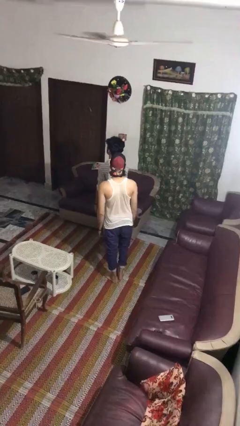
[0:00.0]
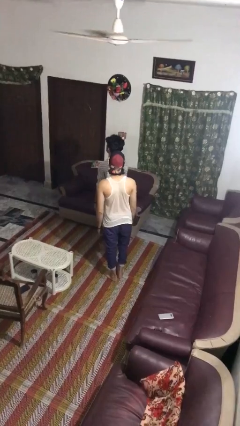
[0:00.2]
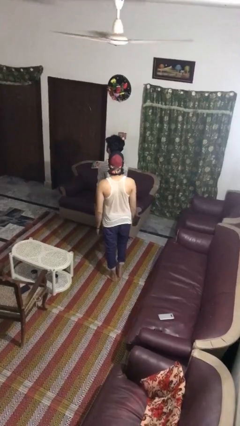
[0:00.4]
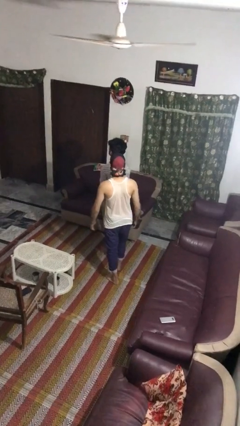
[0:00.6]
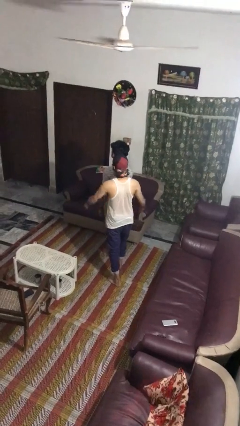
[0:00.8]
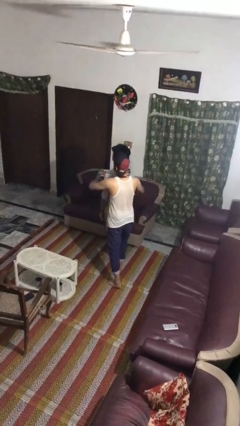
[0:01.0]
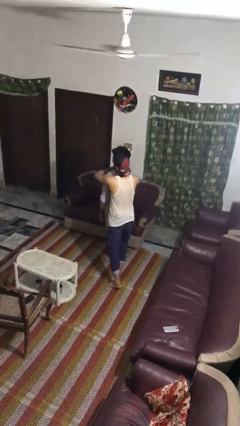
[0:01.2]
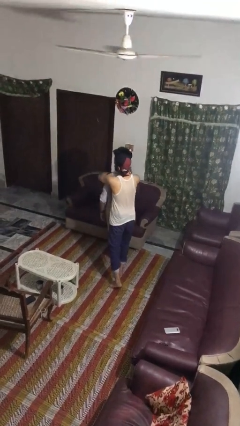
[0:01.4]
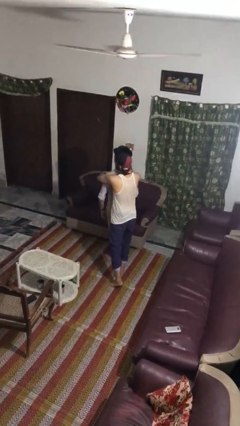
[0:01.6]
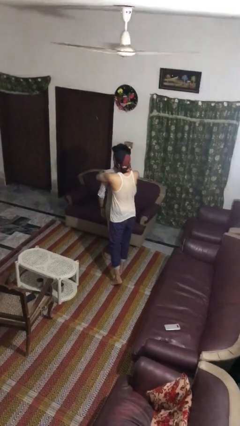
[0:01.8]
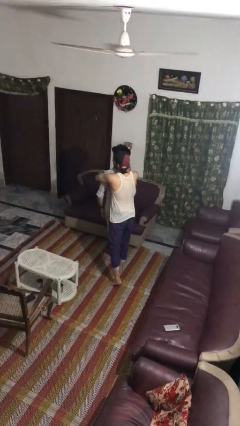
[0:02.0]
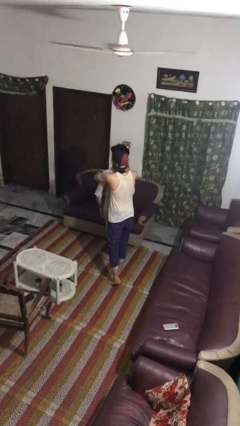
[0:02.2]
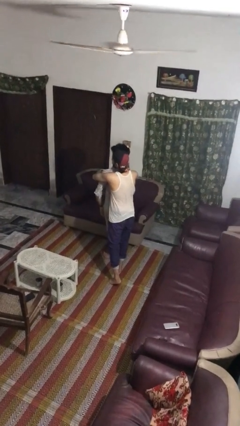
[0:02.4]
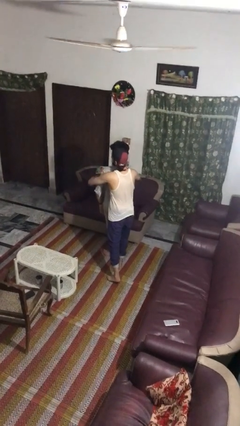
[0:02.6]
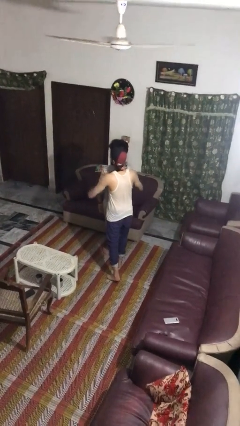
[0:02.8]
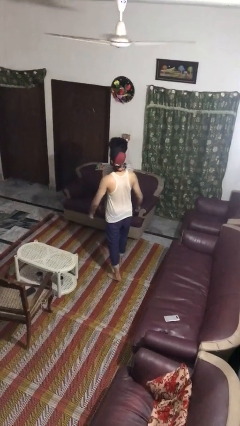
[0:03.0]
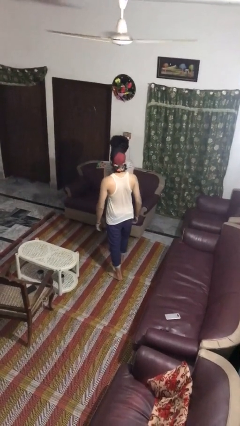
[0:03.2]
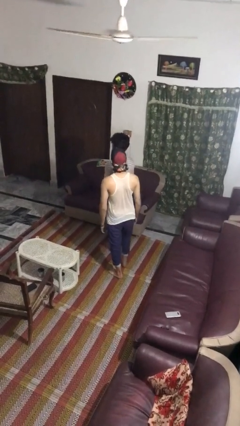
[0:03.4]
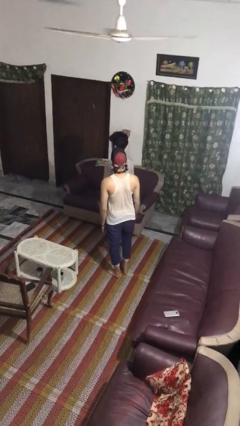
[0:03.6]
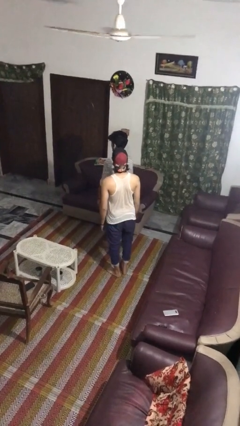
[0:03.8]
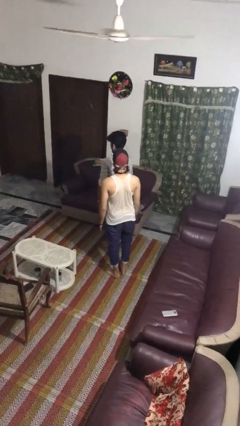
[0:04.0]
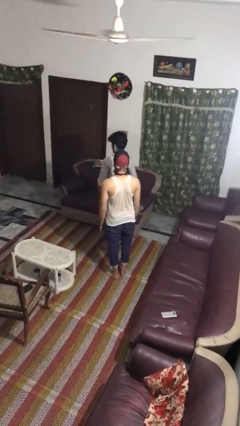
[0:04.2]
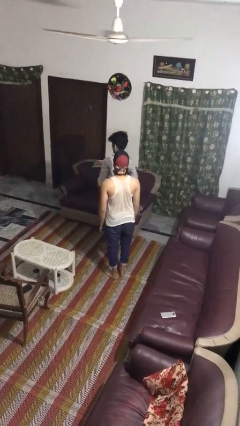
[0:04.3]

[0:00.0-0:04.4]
person hugs person from behind

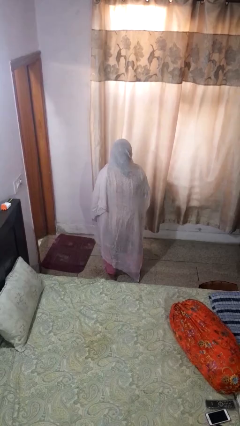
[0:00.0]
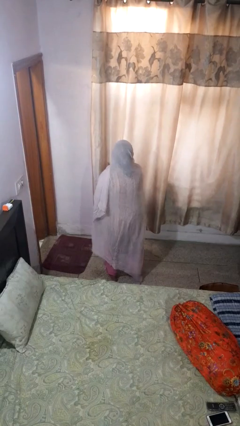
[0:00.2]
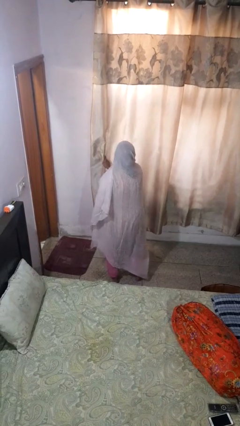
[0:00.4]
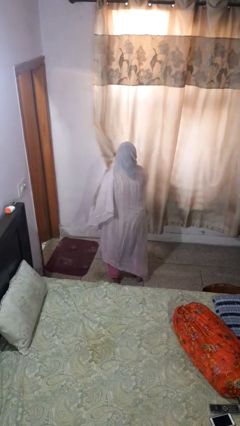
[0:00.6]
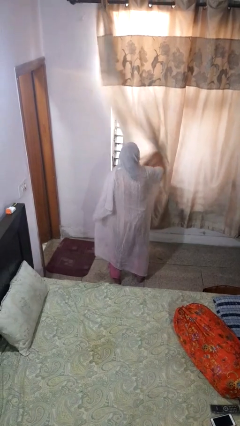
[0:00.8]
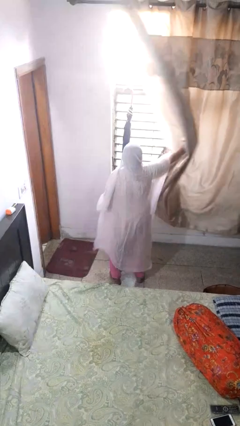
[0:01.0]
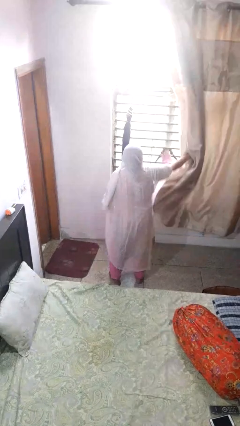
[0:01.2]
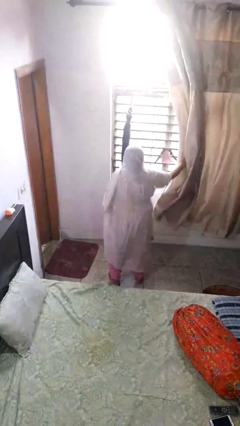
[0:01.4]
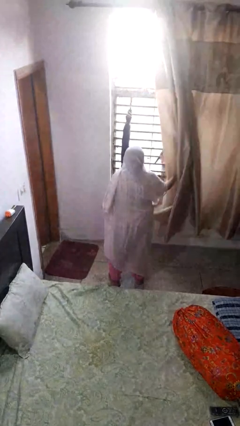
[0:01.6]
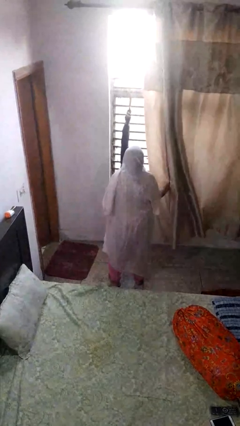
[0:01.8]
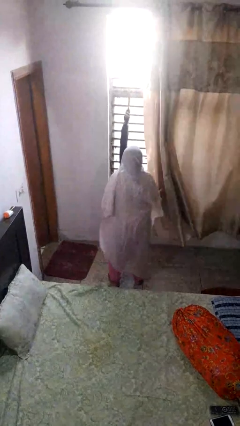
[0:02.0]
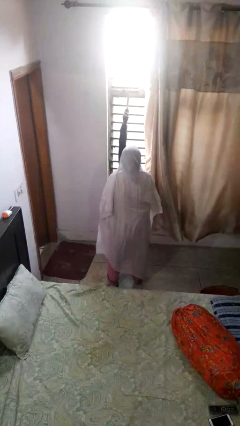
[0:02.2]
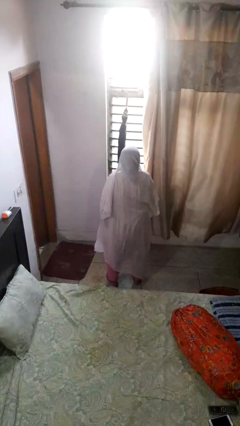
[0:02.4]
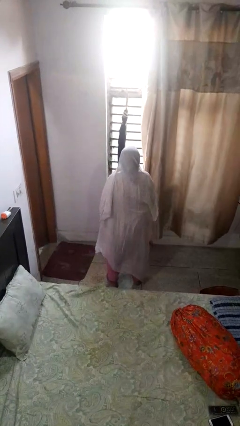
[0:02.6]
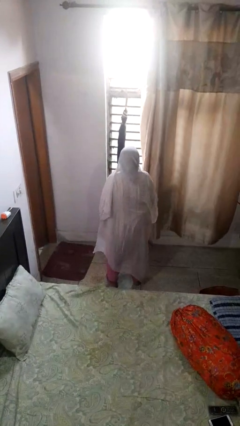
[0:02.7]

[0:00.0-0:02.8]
person opens curtains

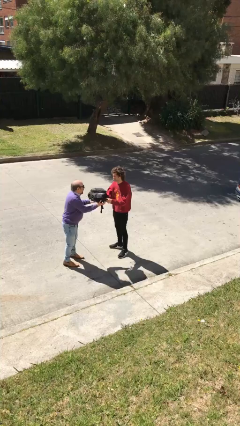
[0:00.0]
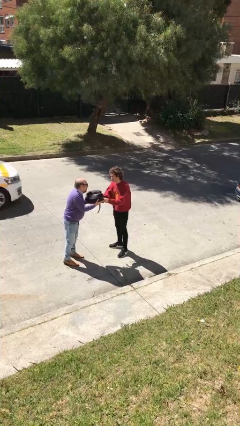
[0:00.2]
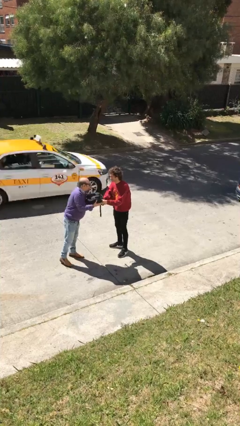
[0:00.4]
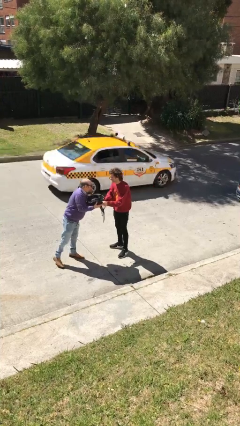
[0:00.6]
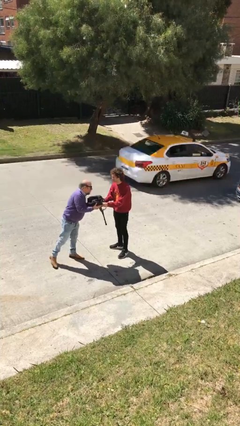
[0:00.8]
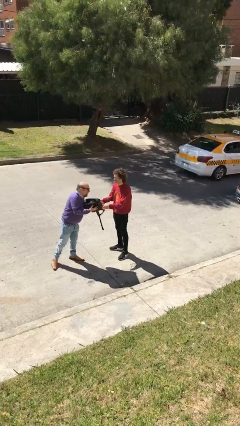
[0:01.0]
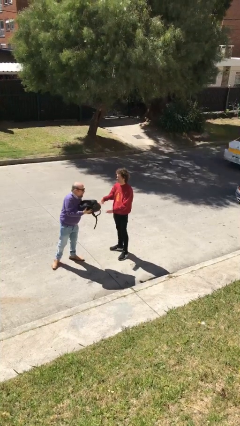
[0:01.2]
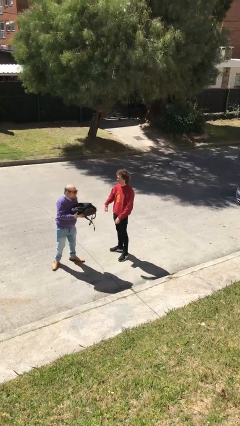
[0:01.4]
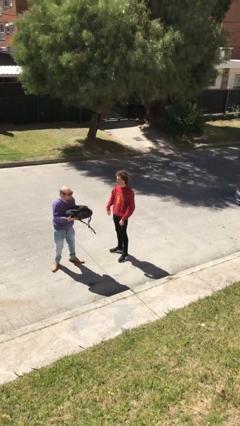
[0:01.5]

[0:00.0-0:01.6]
person transfers object to person

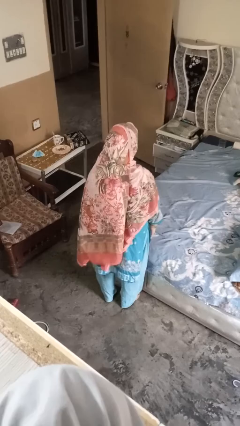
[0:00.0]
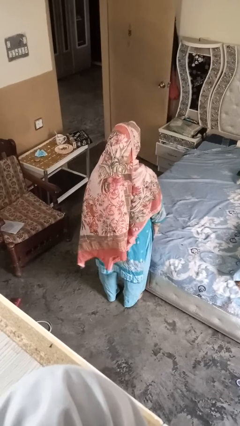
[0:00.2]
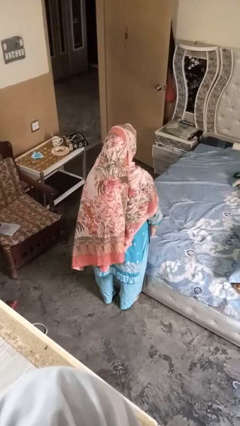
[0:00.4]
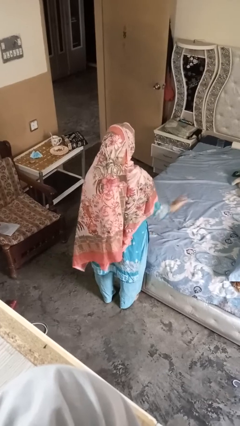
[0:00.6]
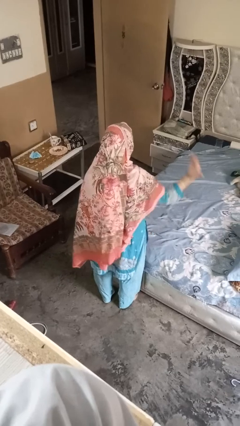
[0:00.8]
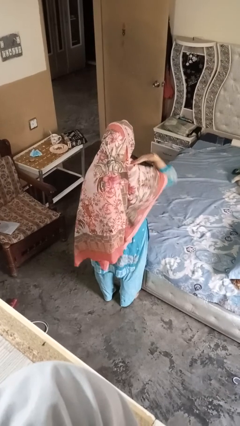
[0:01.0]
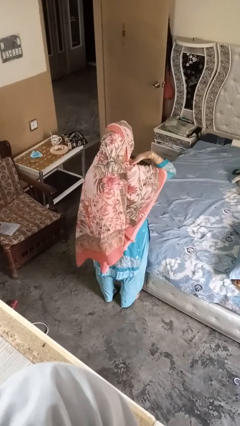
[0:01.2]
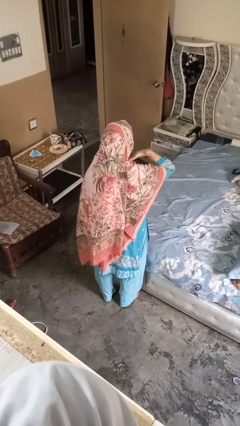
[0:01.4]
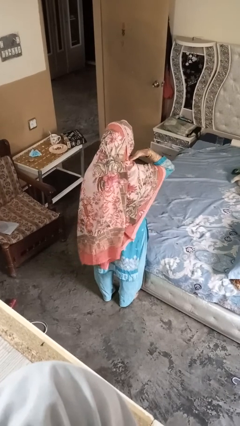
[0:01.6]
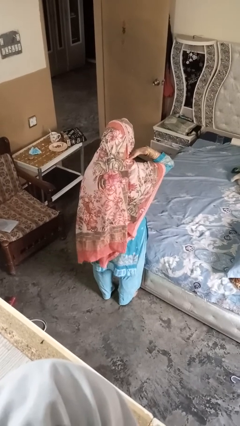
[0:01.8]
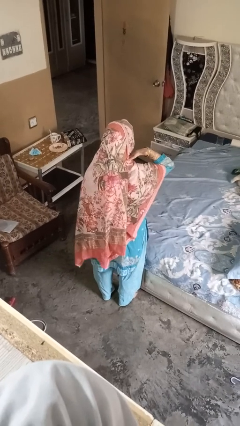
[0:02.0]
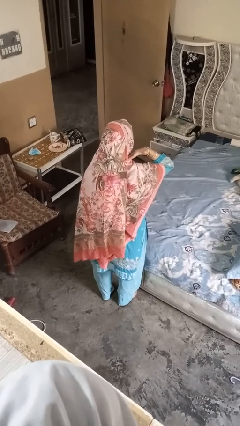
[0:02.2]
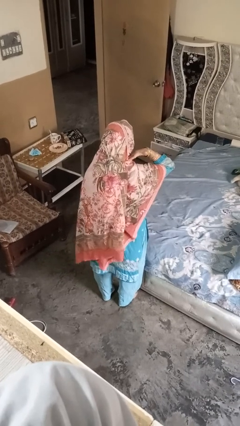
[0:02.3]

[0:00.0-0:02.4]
person gestures cut

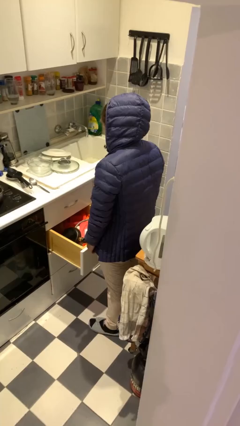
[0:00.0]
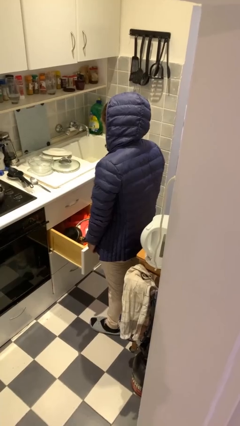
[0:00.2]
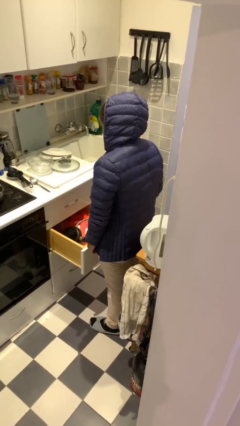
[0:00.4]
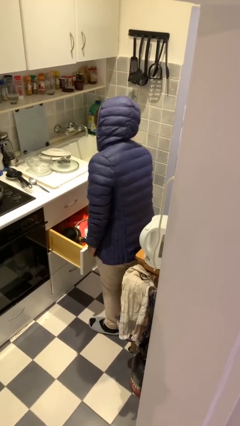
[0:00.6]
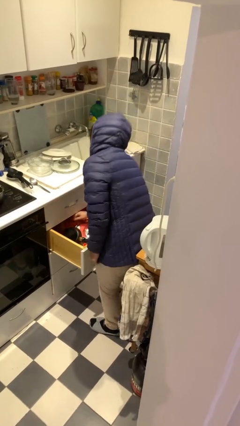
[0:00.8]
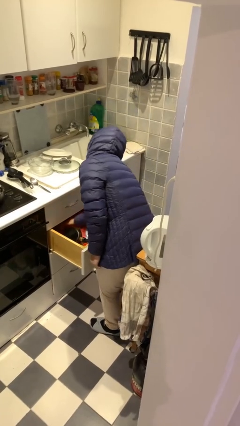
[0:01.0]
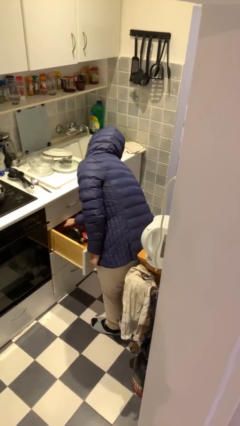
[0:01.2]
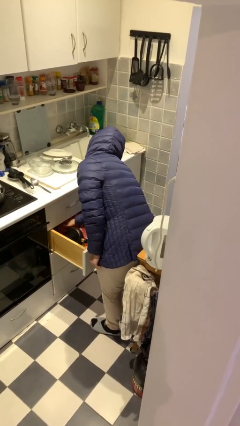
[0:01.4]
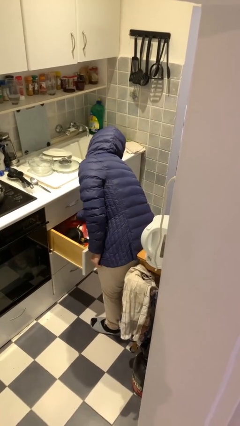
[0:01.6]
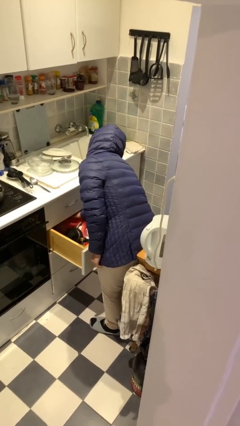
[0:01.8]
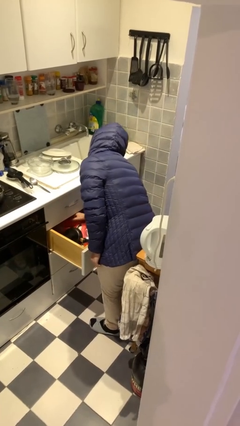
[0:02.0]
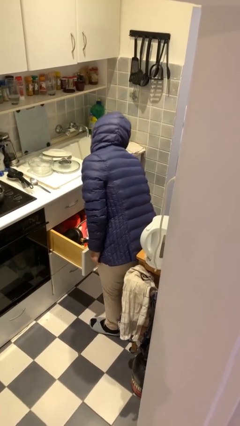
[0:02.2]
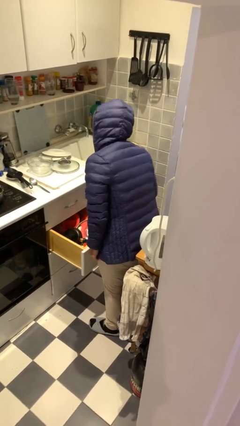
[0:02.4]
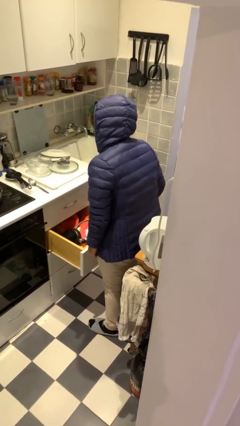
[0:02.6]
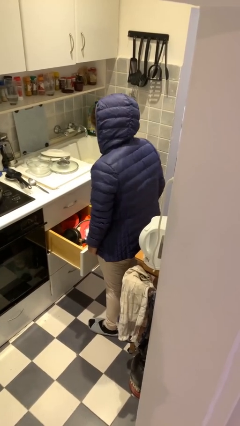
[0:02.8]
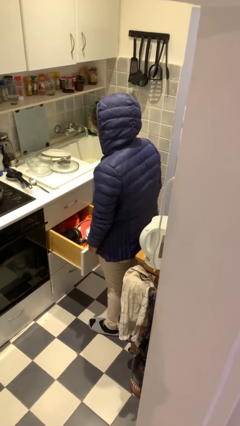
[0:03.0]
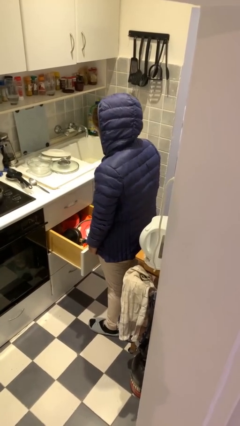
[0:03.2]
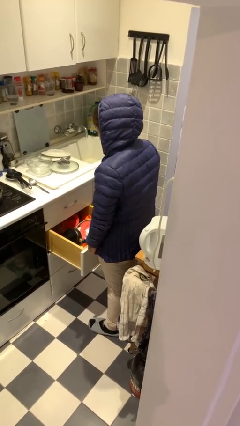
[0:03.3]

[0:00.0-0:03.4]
person searches in kitchen drawer

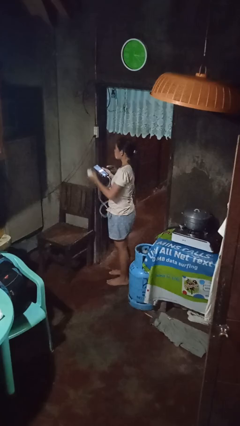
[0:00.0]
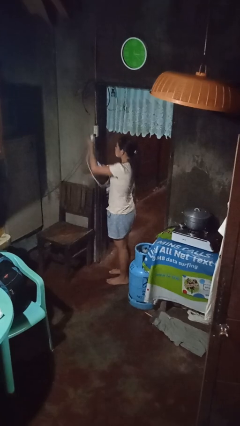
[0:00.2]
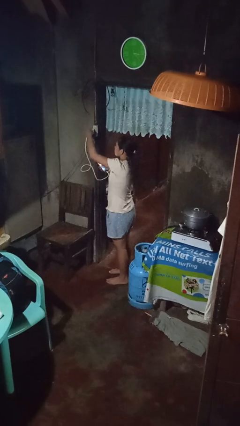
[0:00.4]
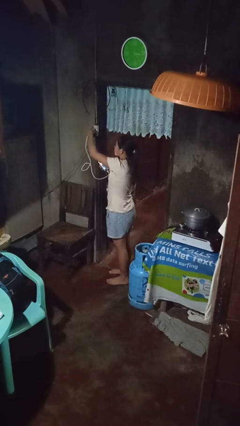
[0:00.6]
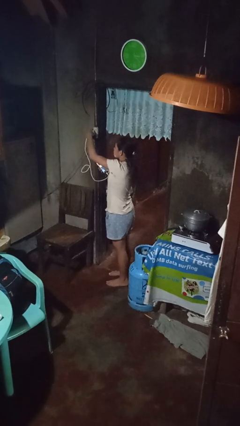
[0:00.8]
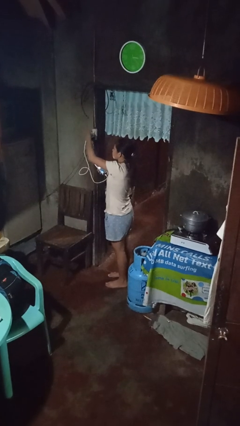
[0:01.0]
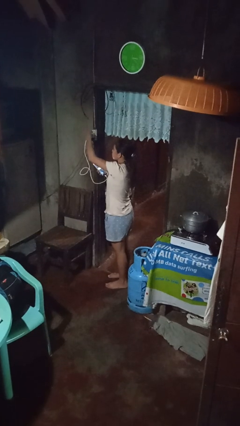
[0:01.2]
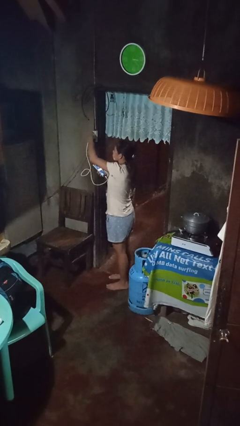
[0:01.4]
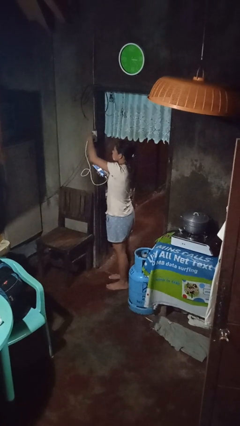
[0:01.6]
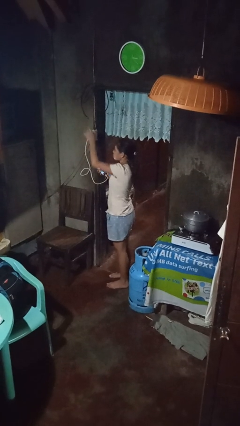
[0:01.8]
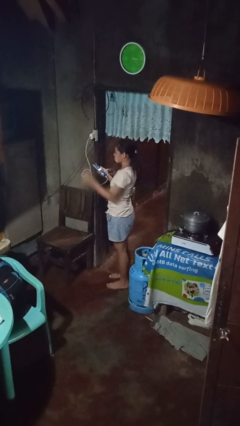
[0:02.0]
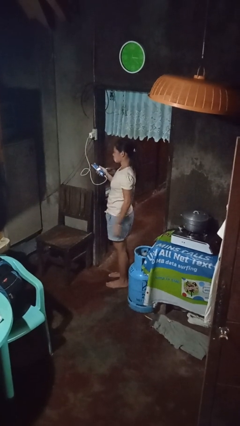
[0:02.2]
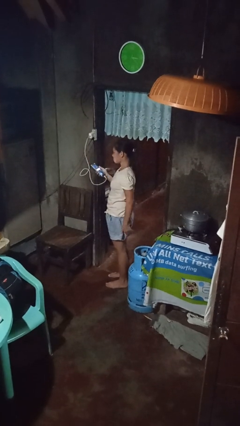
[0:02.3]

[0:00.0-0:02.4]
person plugs into electrical socket

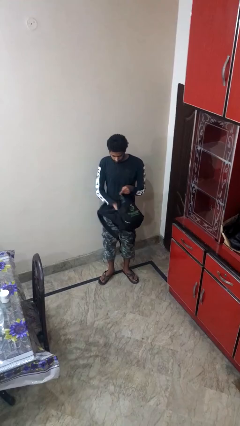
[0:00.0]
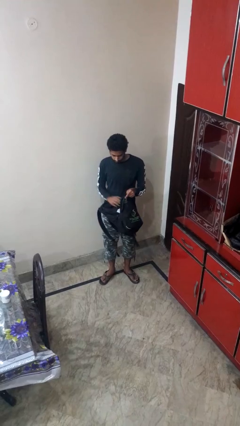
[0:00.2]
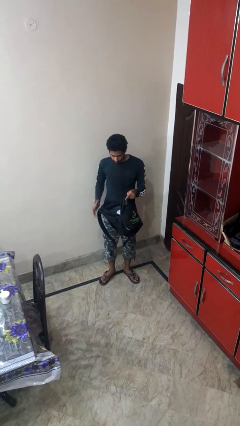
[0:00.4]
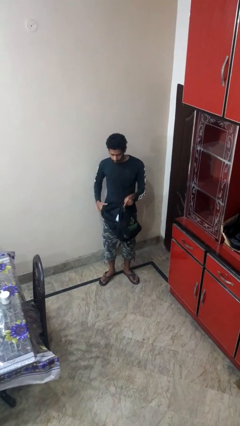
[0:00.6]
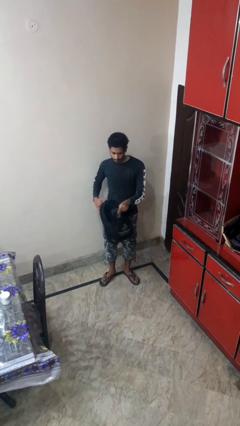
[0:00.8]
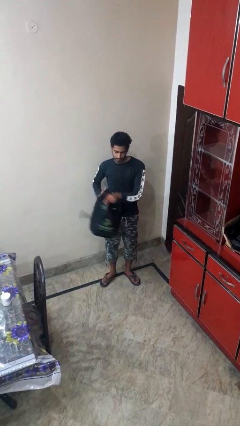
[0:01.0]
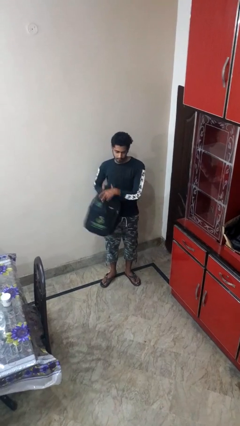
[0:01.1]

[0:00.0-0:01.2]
person puts object into backpack
